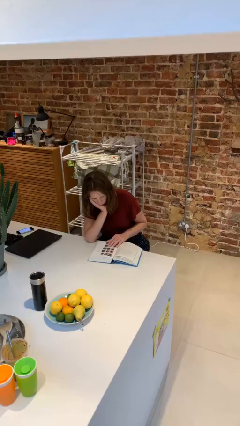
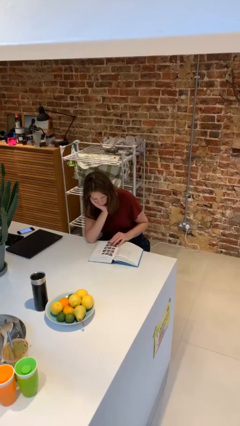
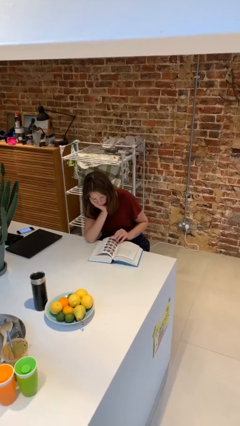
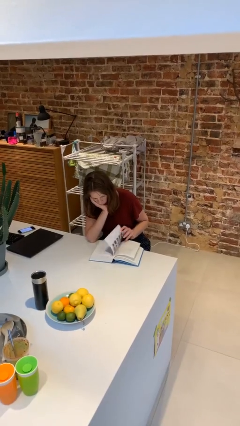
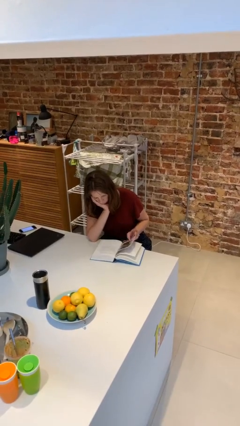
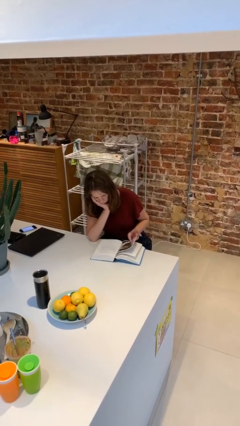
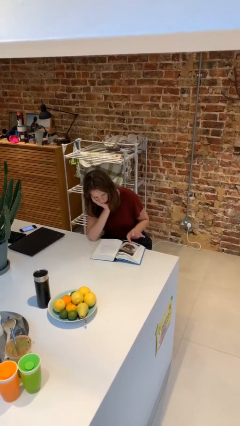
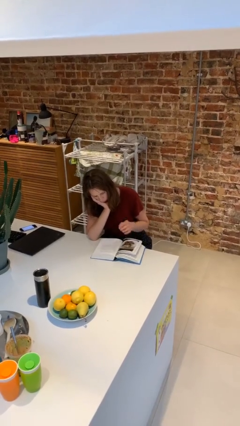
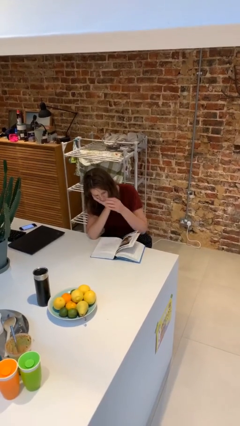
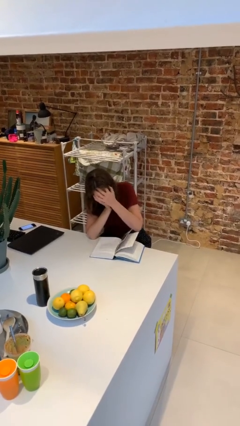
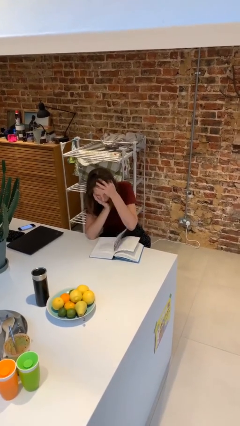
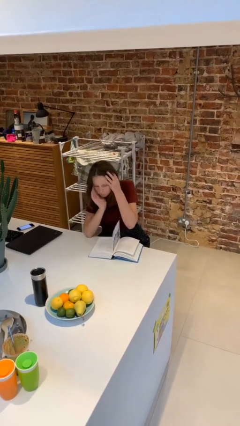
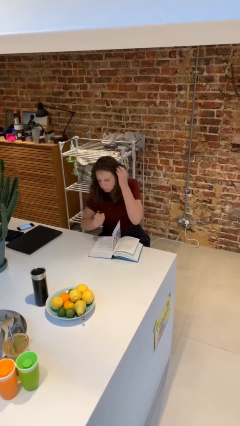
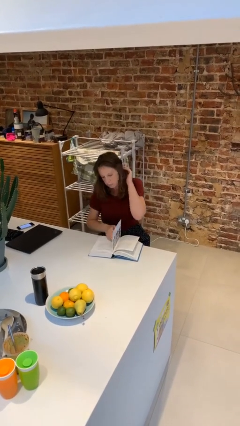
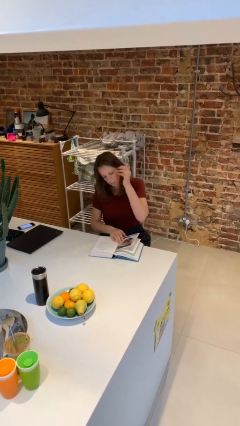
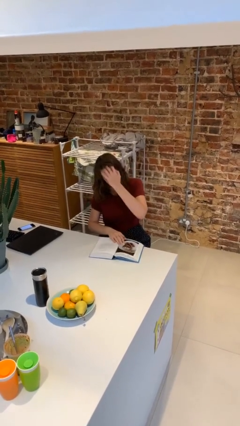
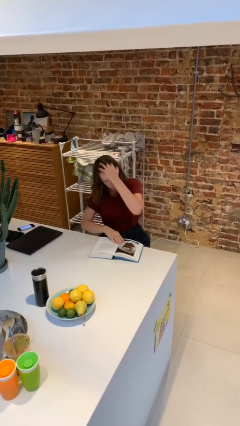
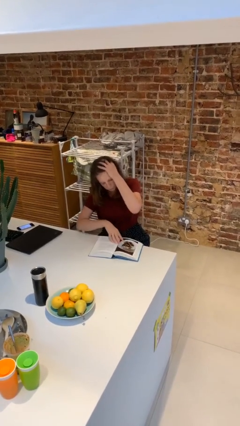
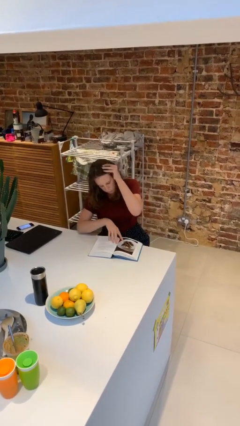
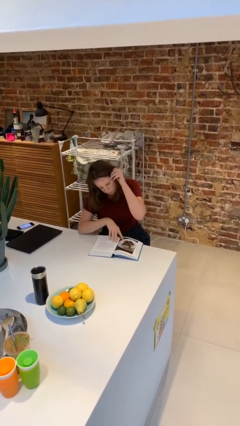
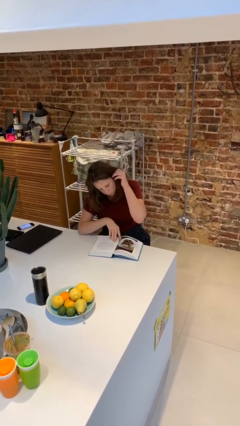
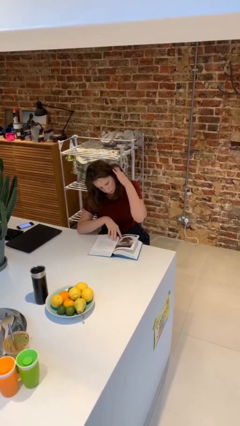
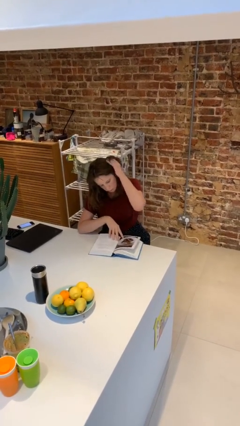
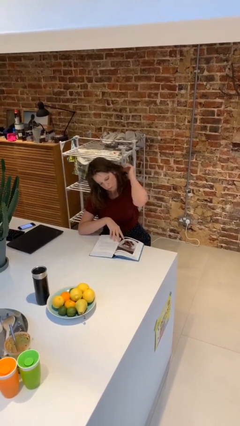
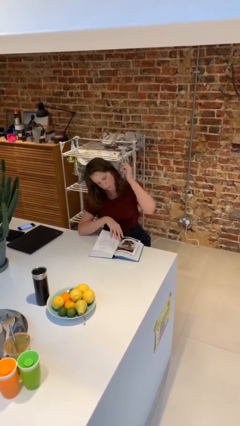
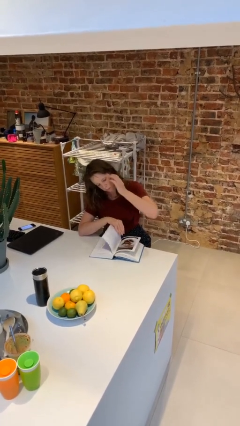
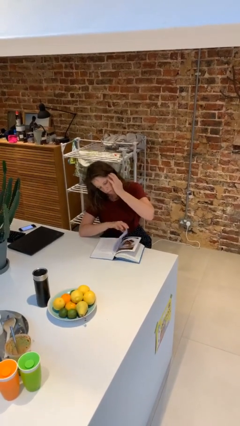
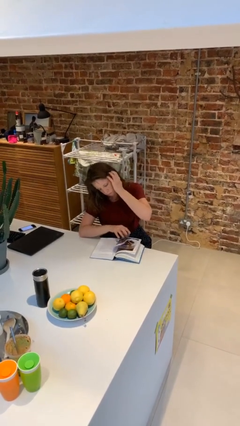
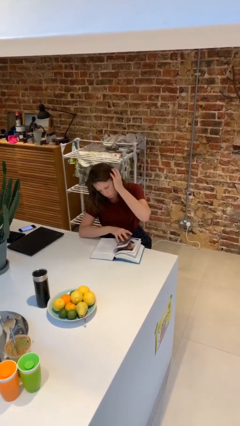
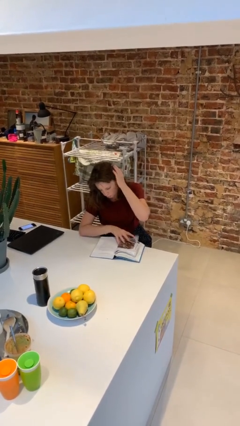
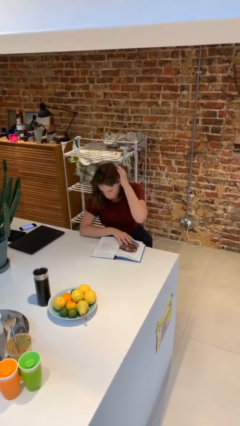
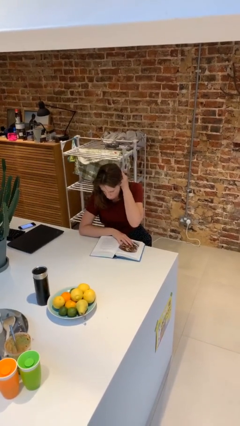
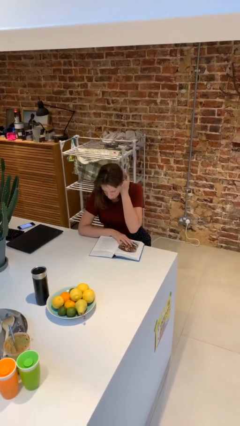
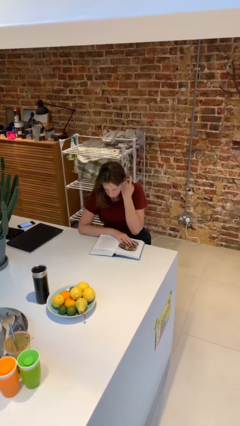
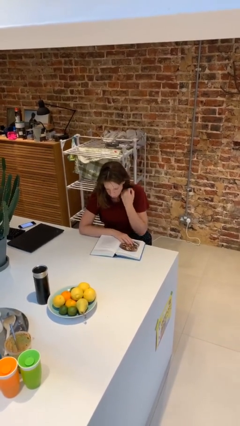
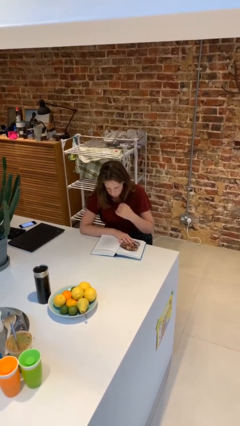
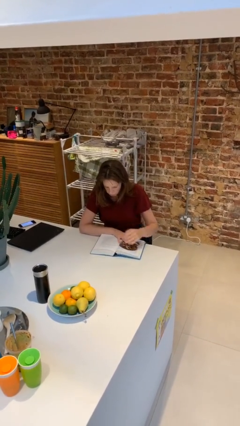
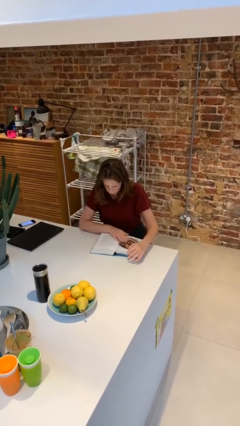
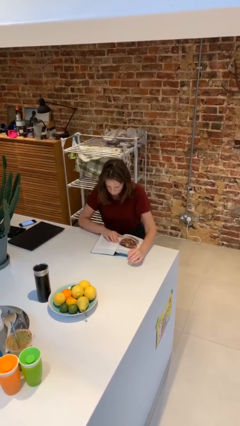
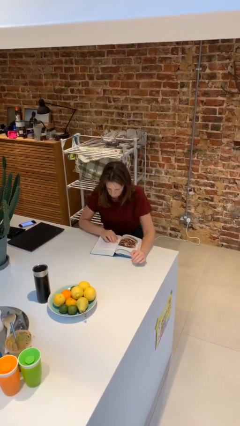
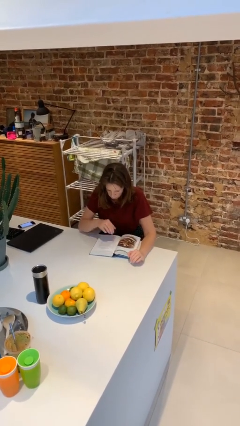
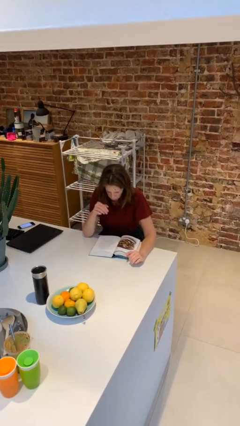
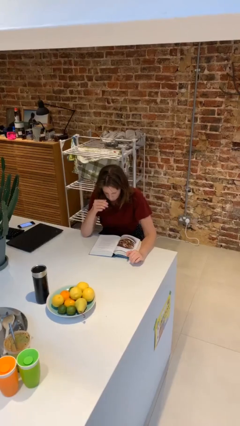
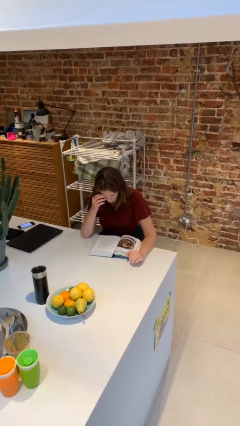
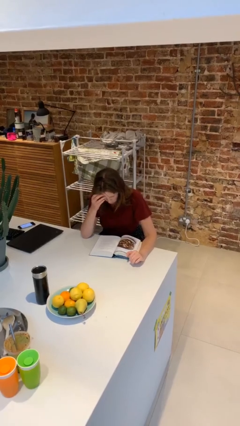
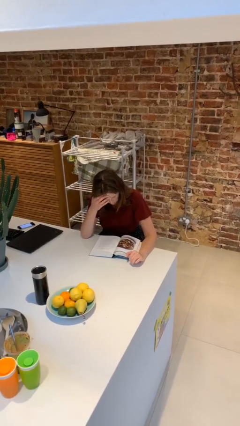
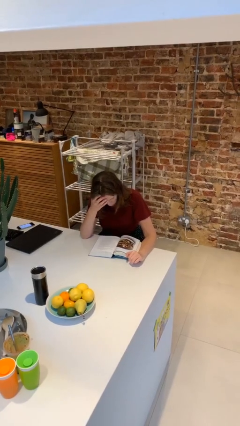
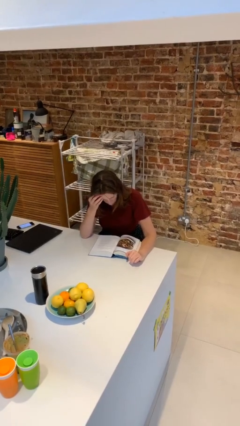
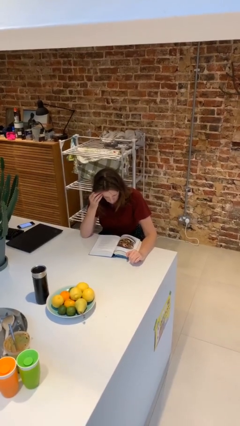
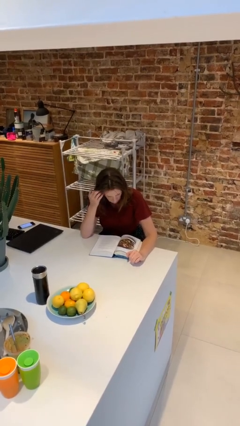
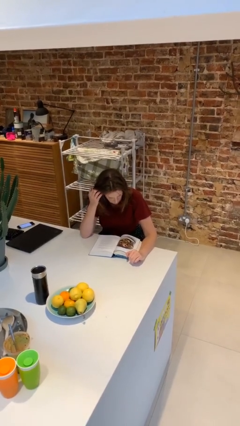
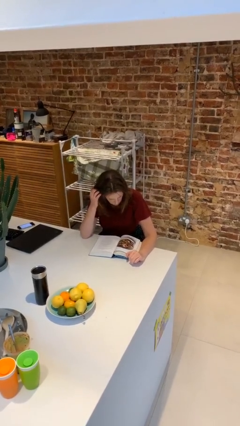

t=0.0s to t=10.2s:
person reads document

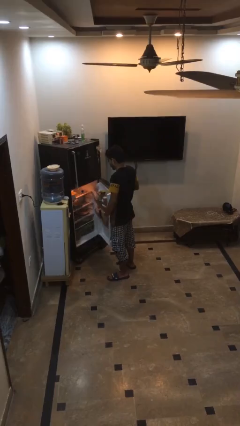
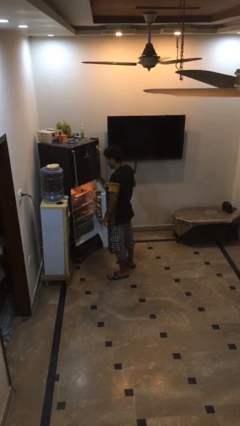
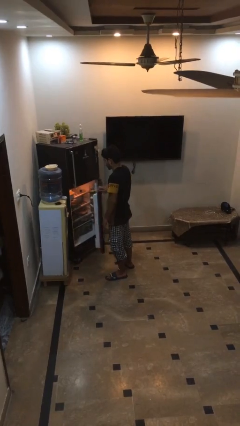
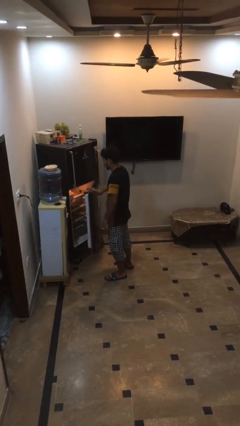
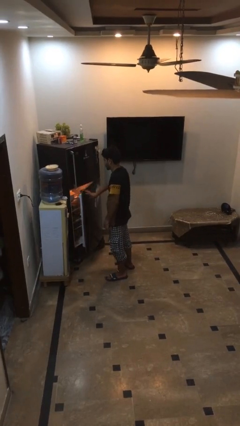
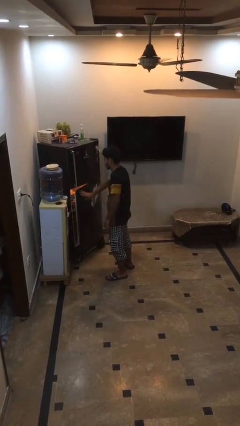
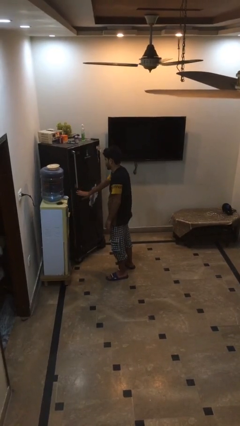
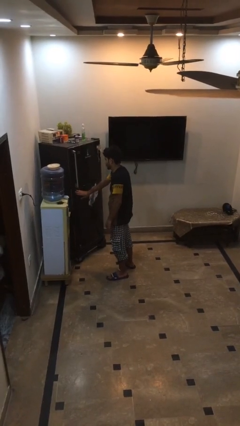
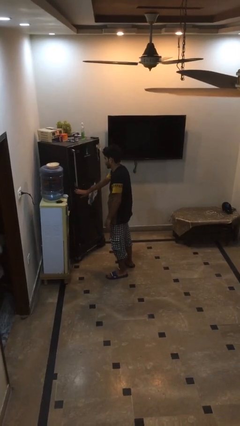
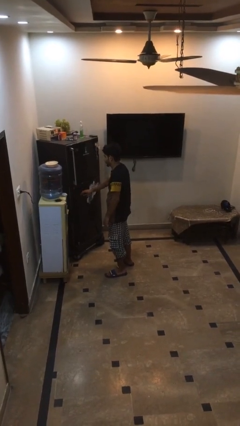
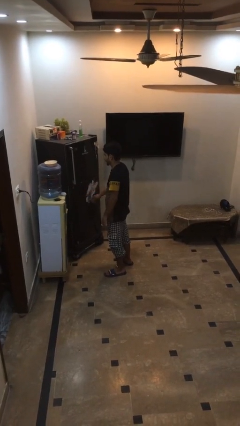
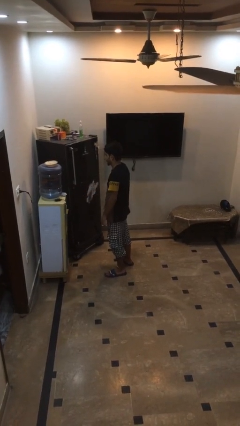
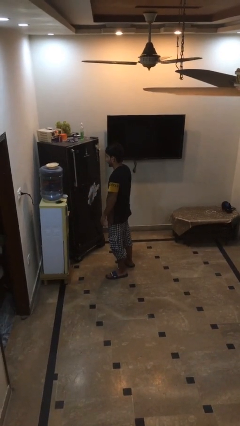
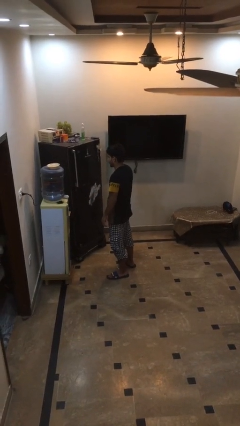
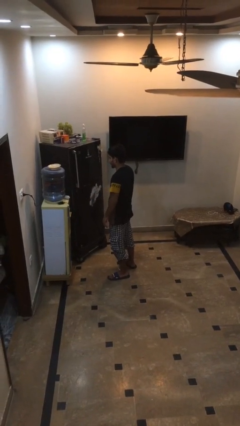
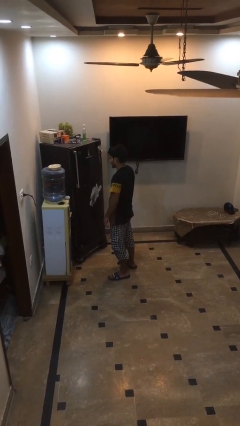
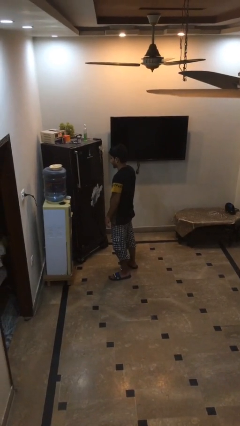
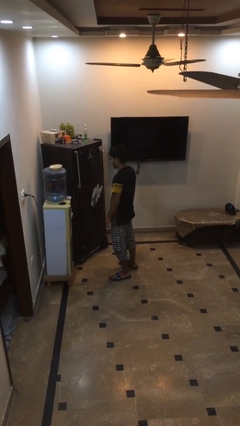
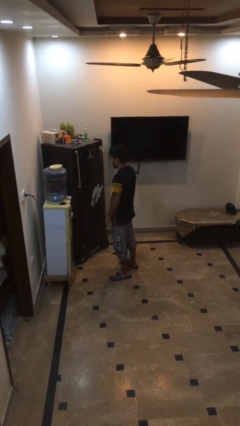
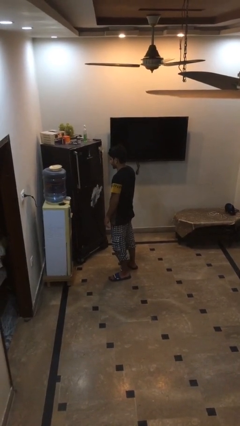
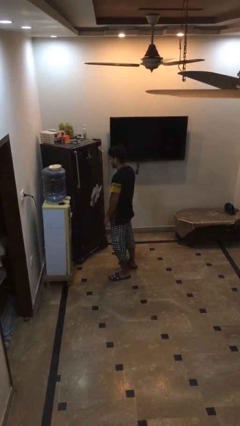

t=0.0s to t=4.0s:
person closes refrigerator

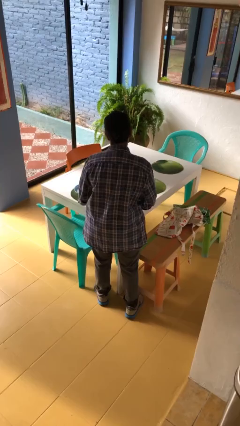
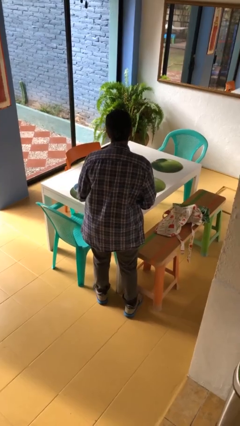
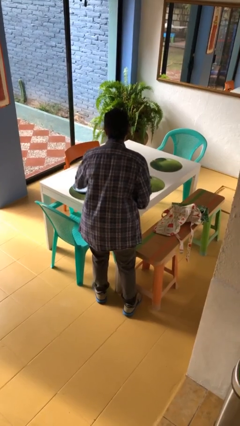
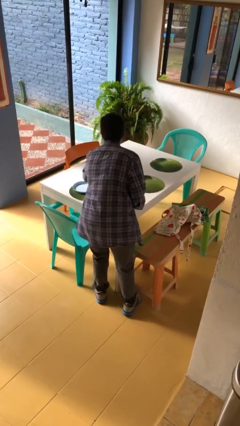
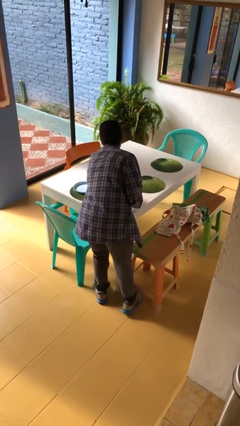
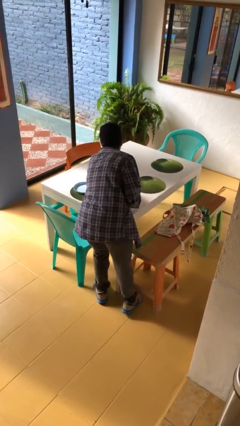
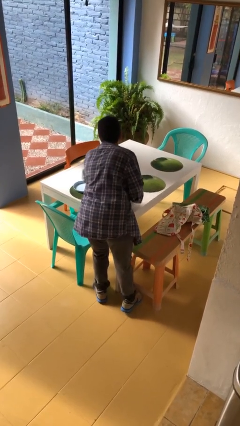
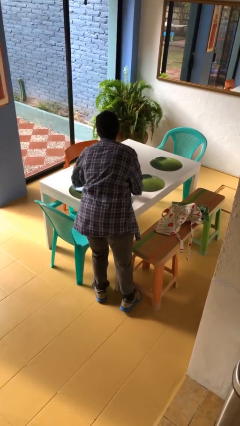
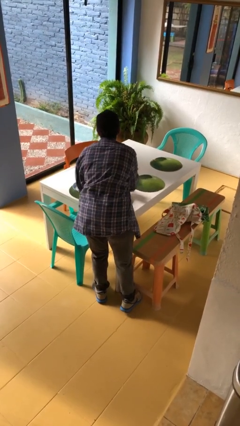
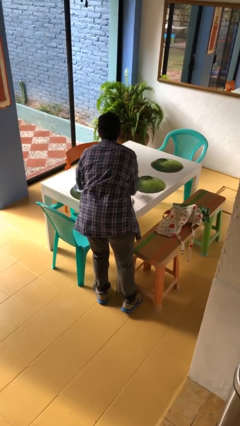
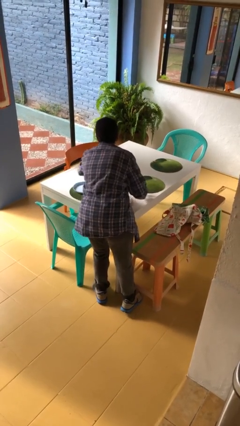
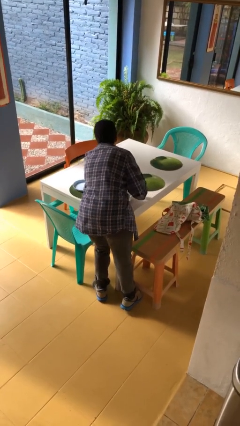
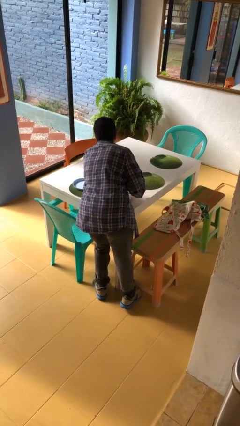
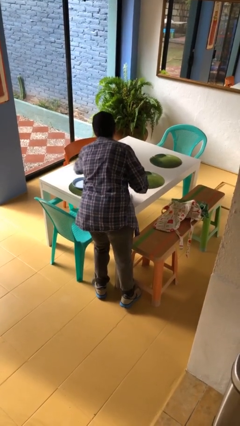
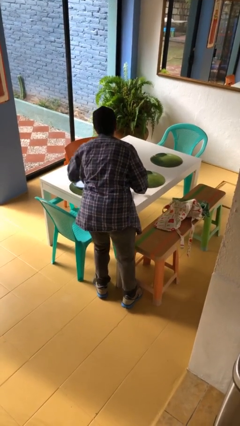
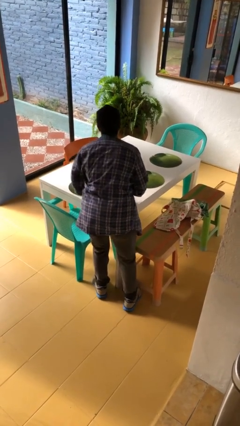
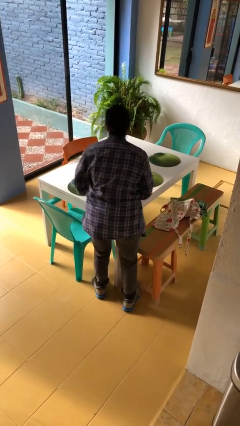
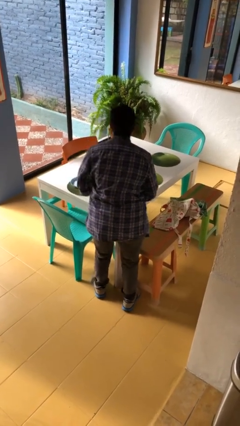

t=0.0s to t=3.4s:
person sets table

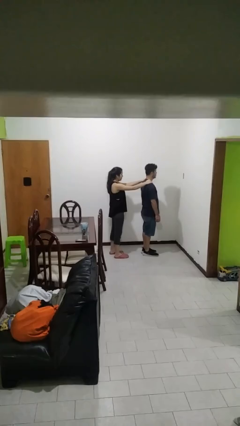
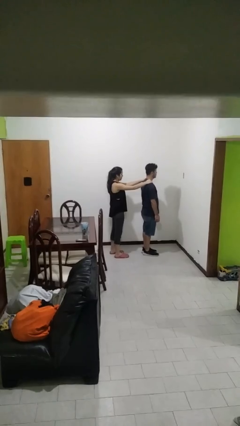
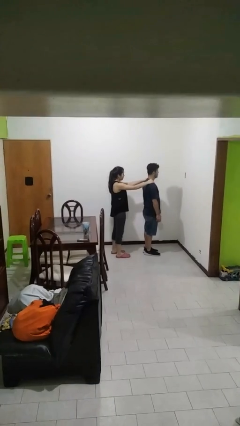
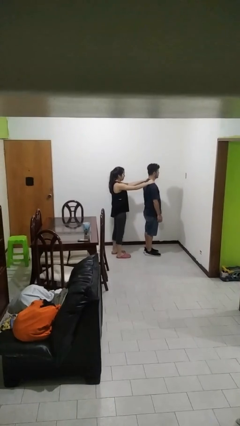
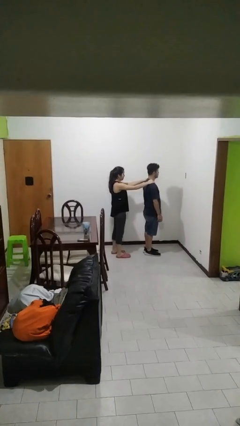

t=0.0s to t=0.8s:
person grabs person by shoulder
